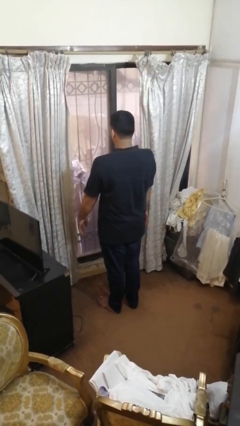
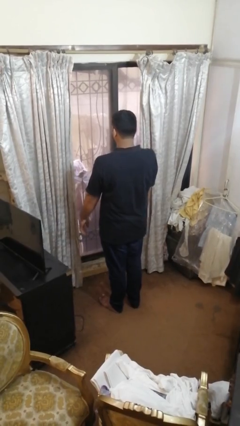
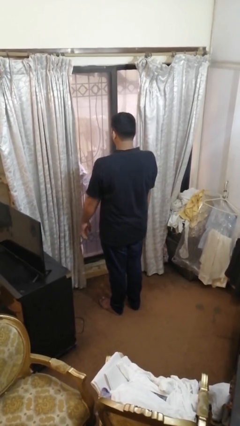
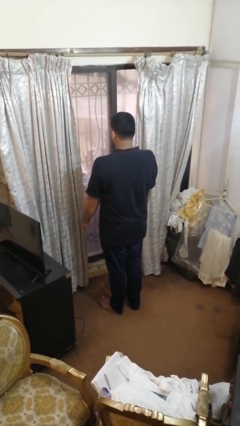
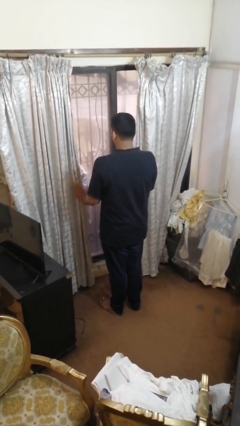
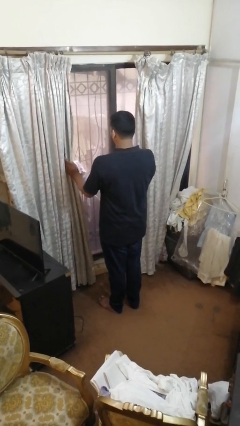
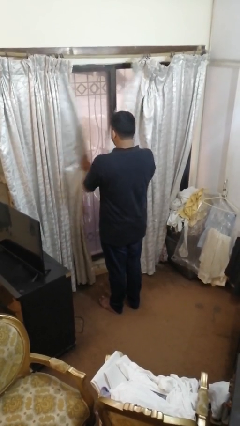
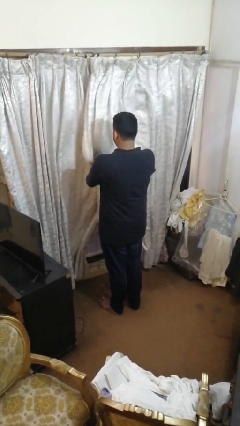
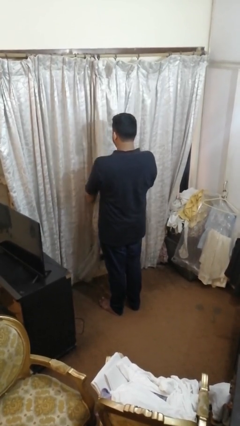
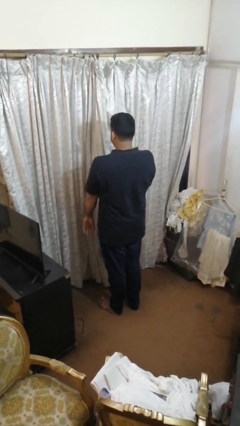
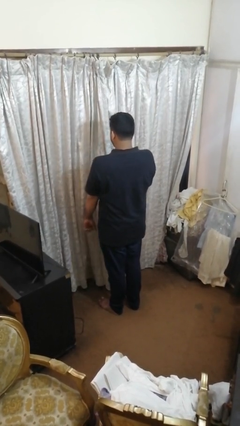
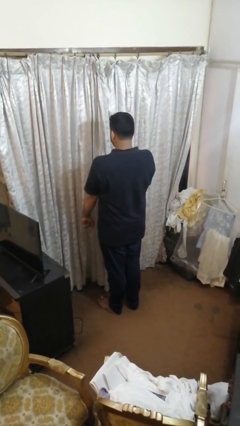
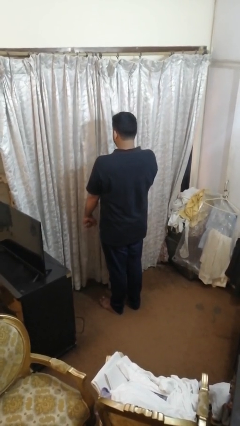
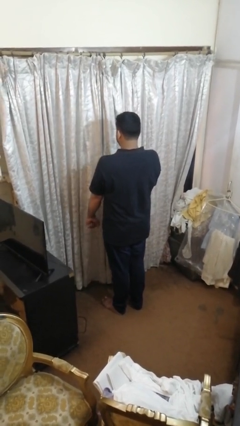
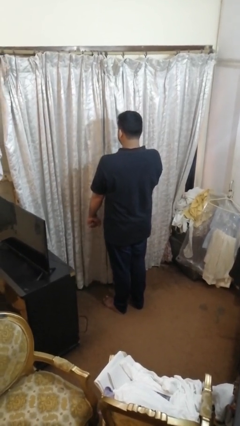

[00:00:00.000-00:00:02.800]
person closes curtains

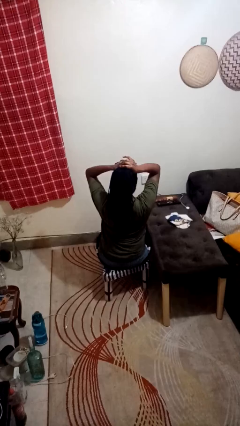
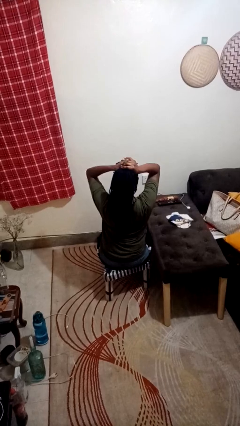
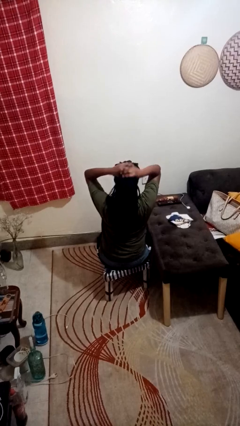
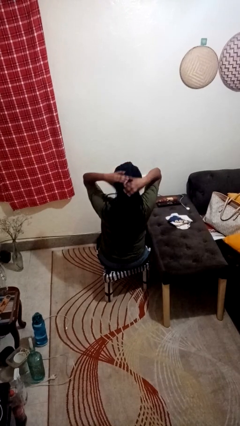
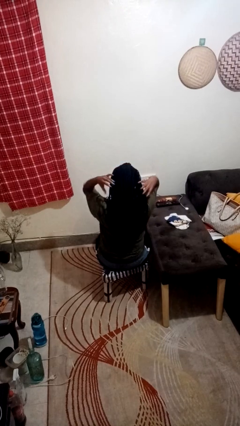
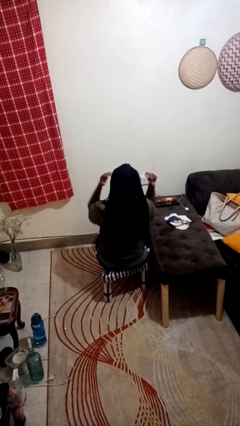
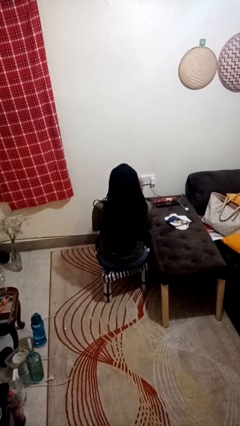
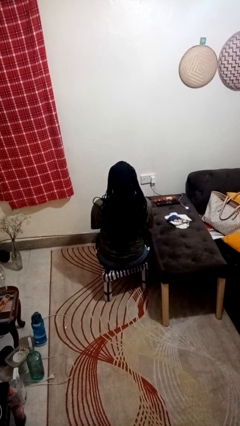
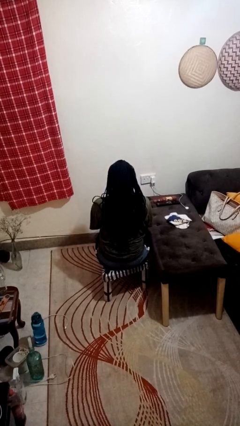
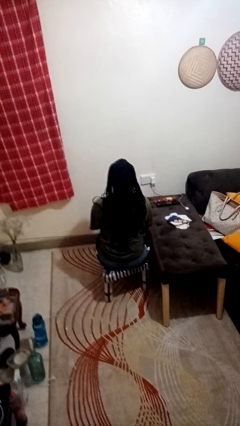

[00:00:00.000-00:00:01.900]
person takes off hairtie

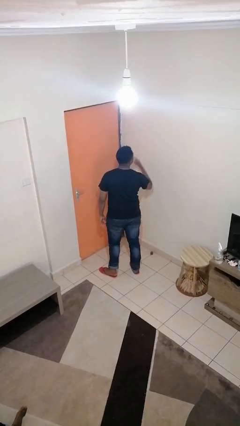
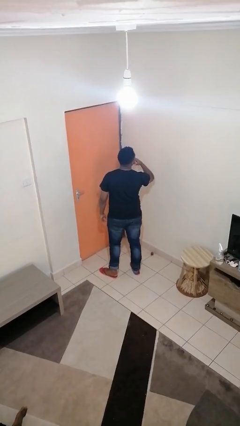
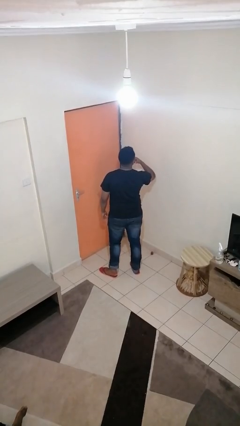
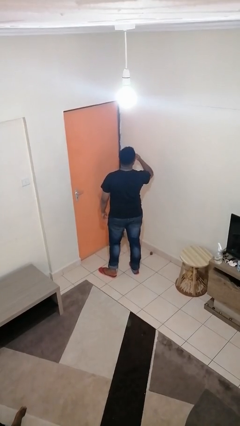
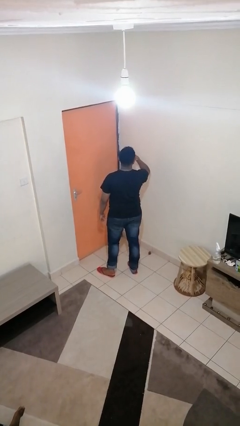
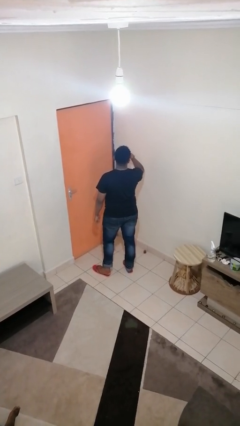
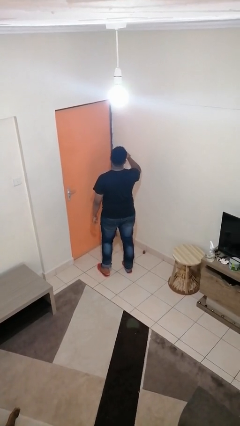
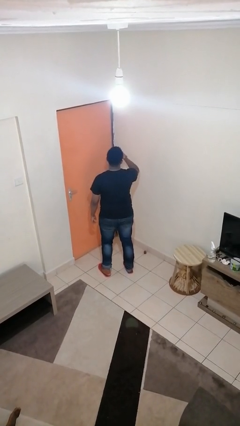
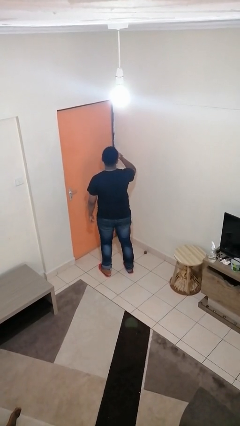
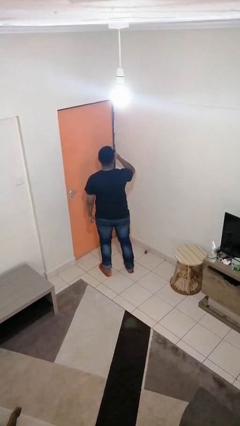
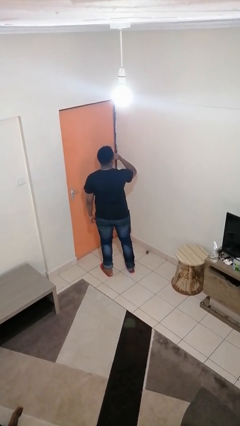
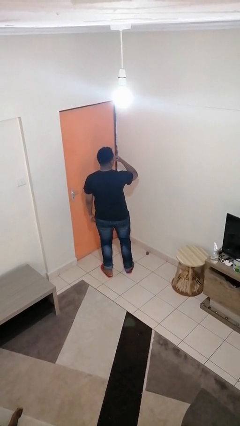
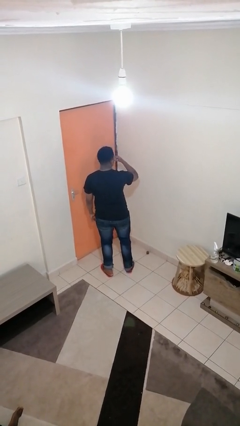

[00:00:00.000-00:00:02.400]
person licks fingers

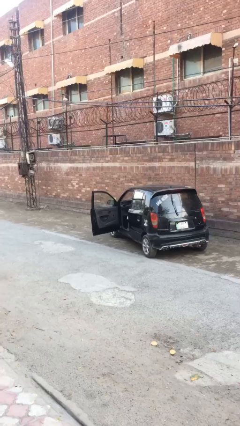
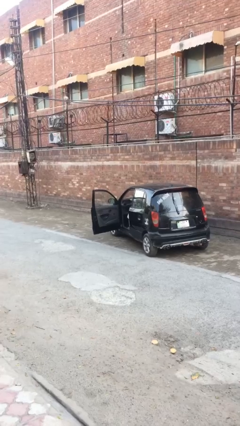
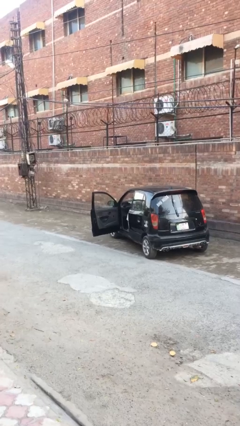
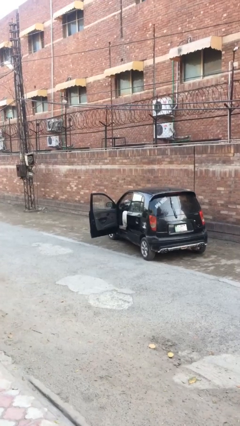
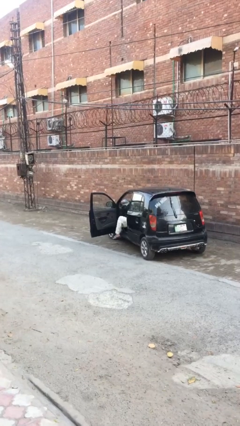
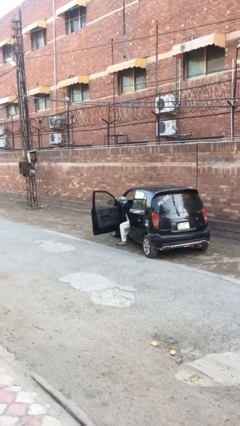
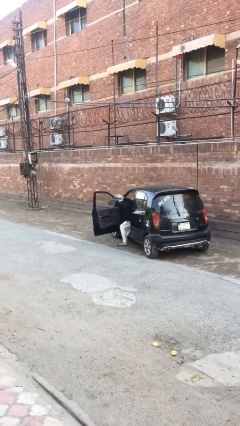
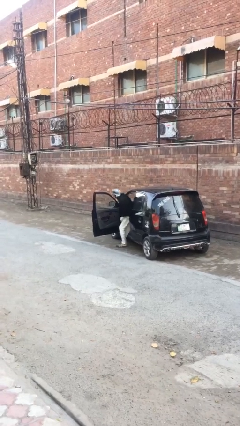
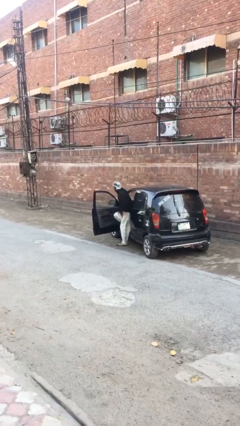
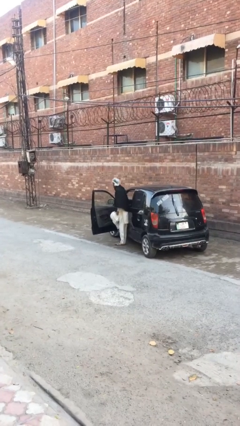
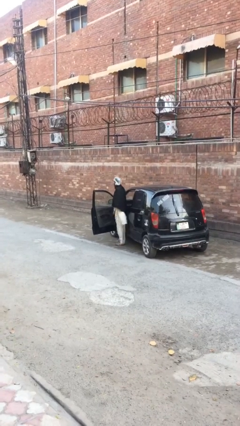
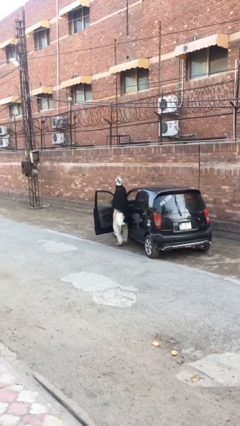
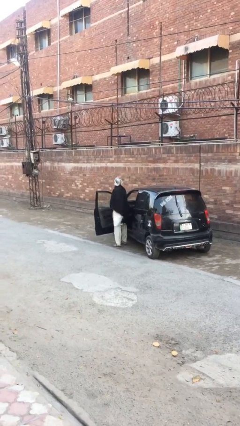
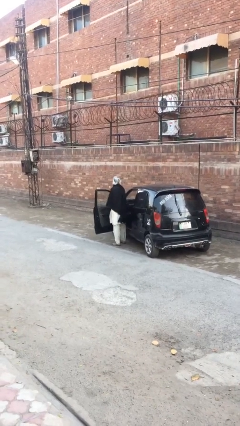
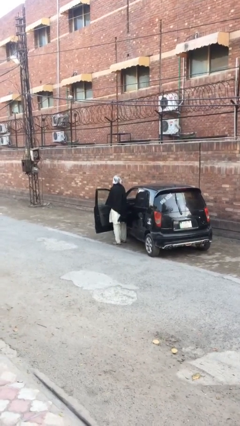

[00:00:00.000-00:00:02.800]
person exits car

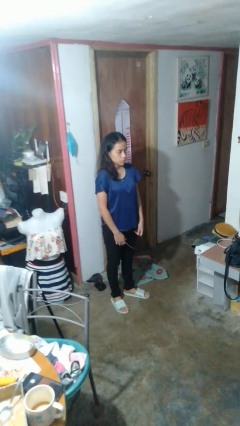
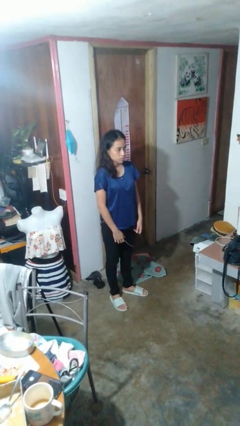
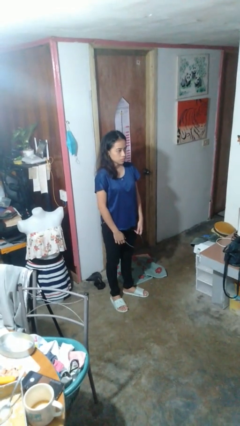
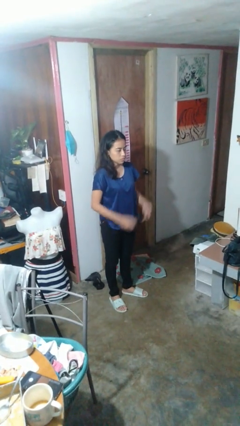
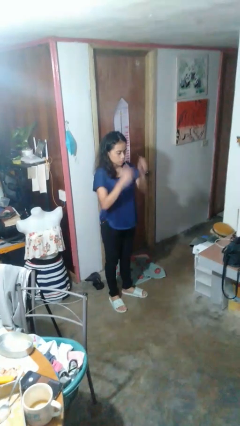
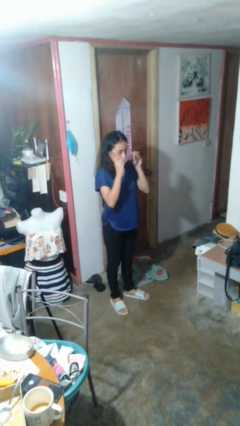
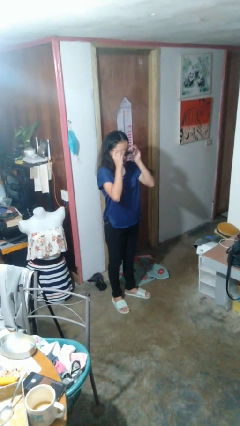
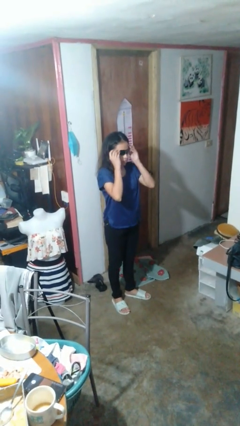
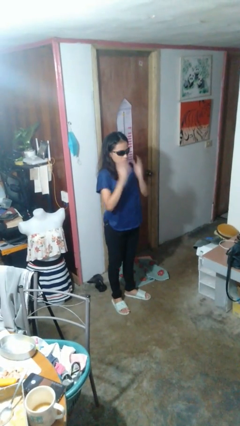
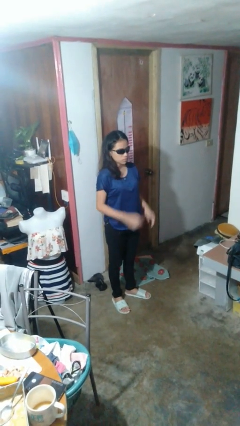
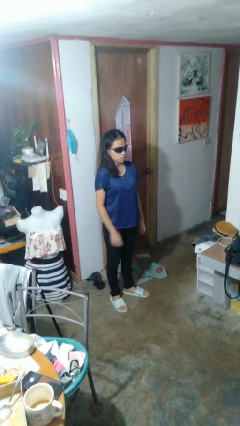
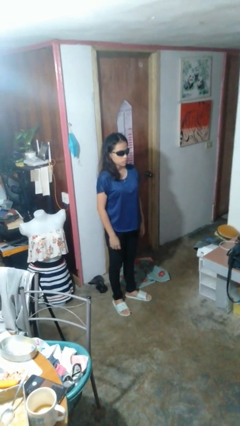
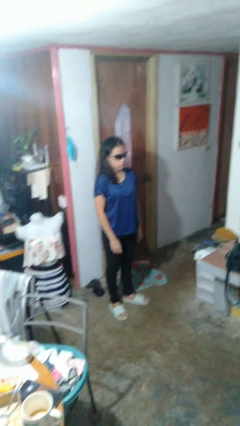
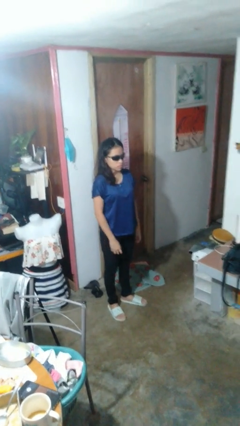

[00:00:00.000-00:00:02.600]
person puts on sunglasses

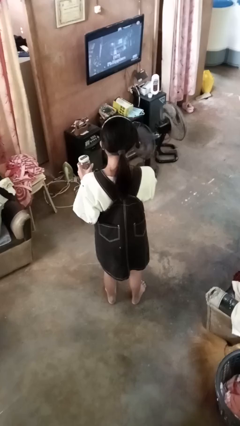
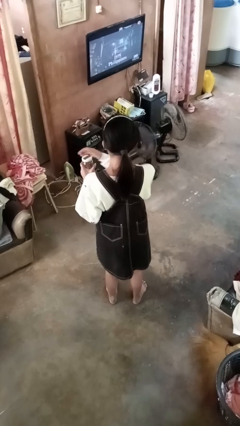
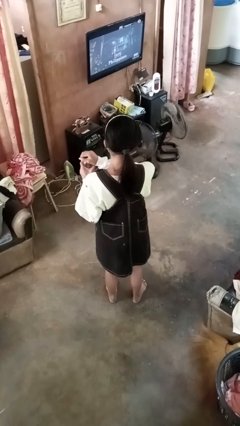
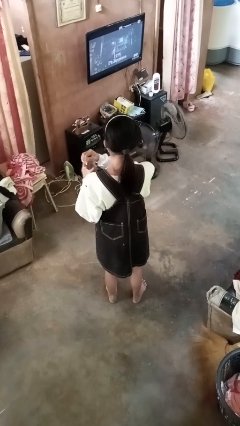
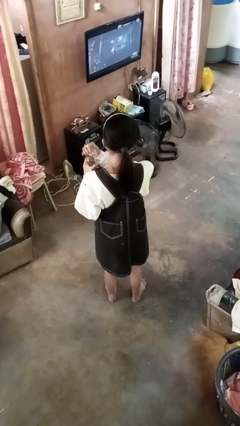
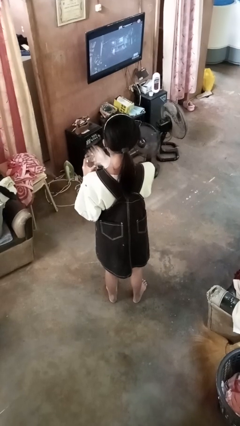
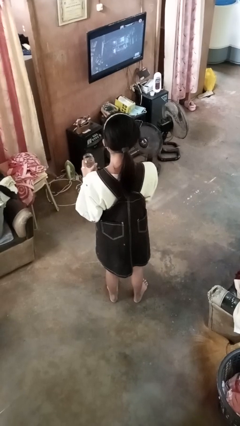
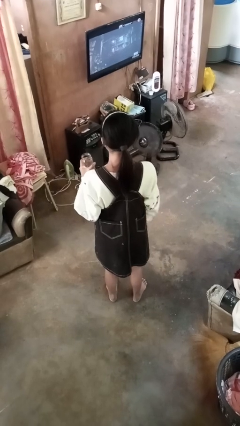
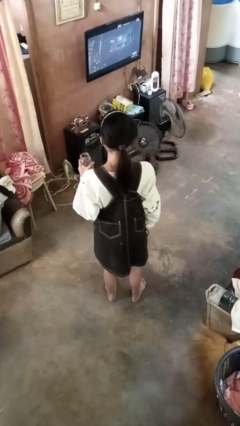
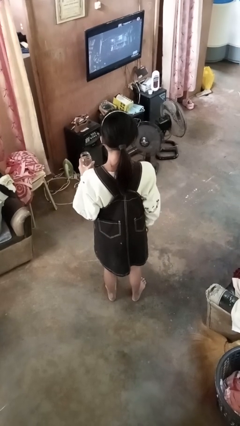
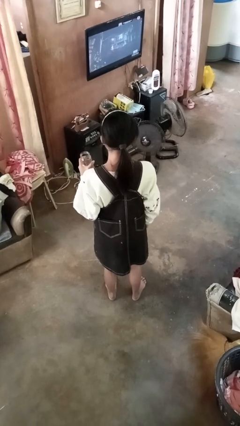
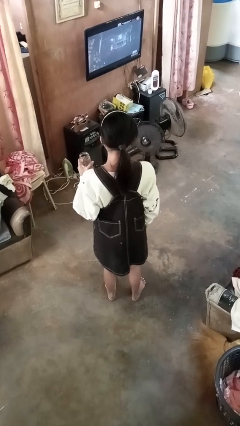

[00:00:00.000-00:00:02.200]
person opens jar

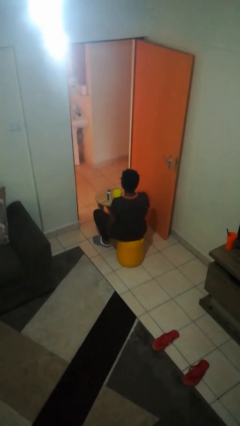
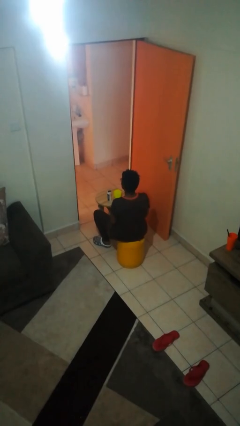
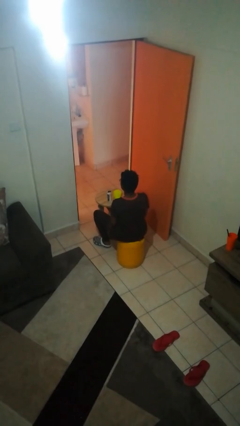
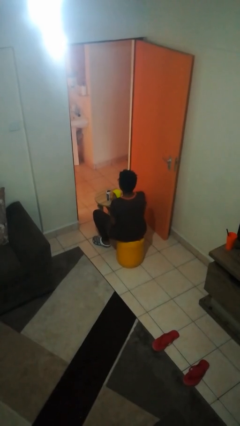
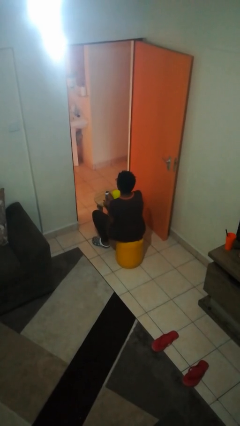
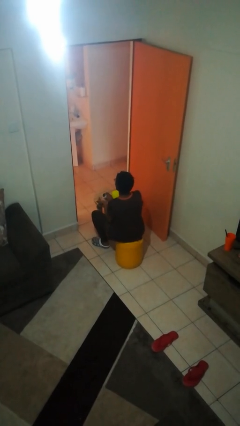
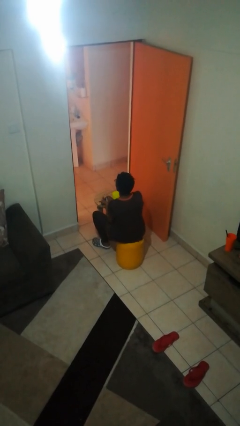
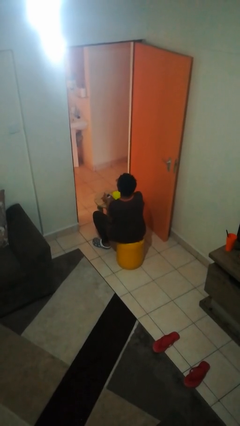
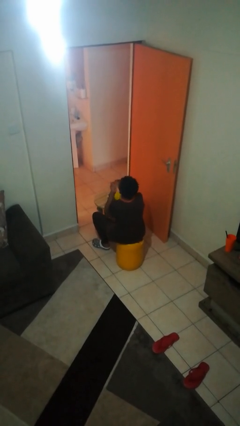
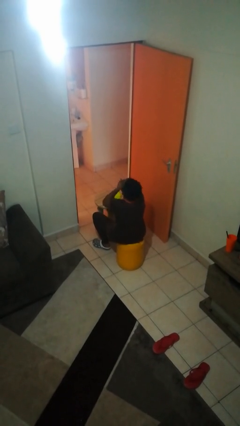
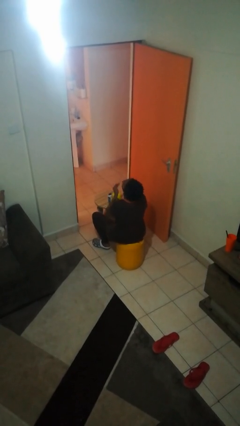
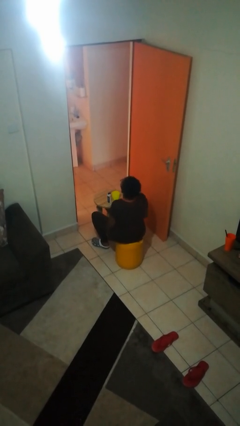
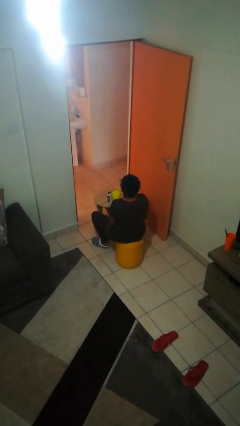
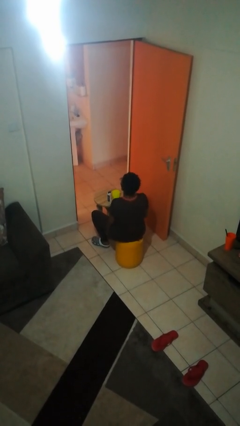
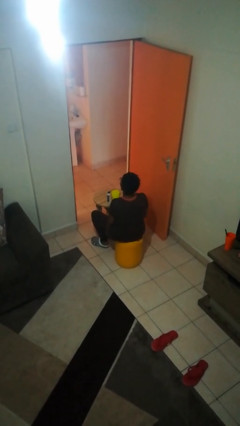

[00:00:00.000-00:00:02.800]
person takes medicine pills
